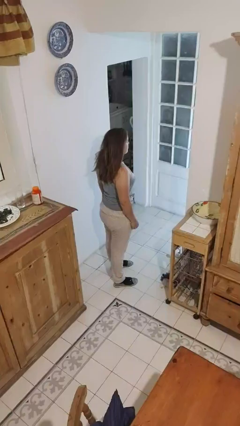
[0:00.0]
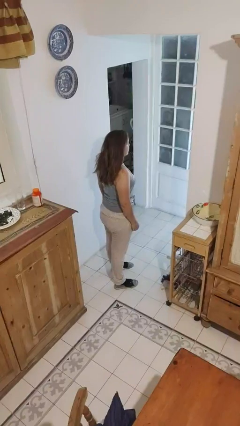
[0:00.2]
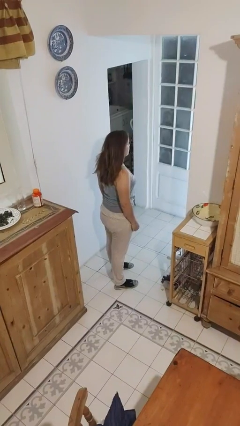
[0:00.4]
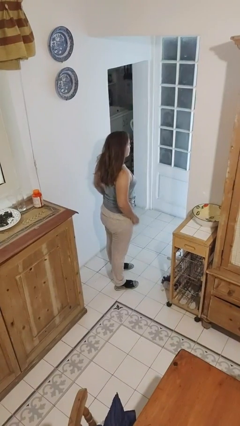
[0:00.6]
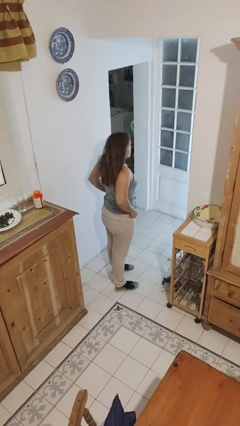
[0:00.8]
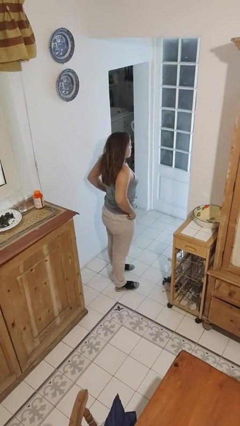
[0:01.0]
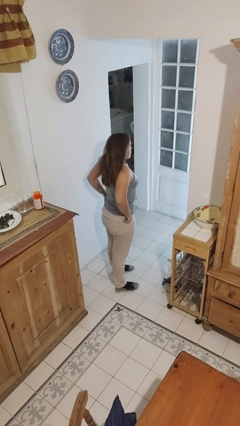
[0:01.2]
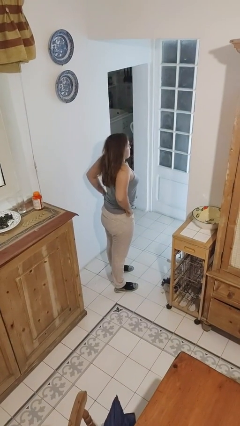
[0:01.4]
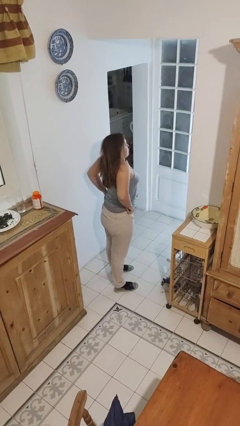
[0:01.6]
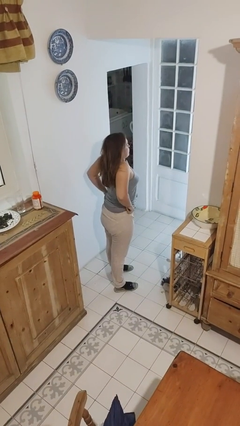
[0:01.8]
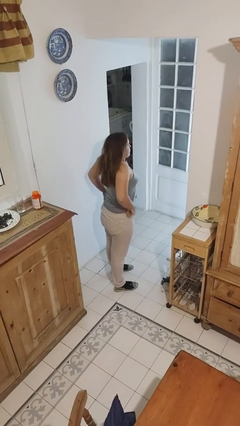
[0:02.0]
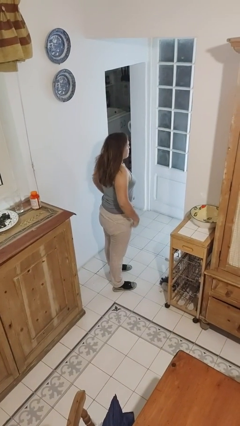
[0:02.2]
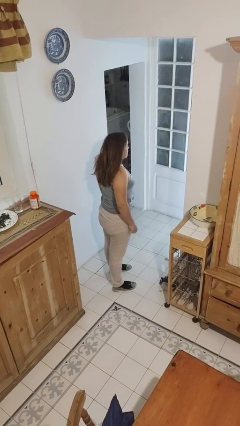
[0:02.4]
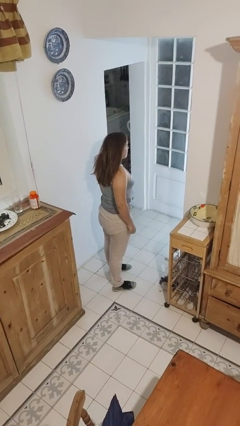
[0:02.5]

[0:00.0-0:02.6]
person hikes up pants

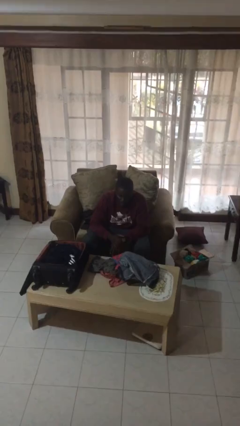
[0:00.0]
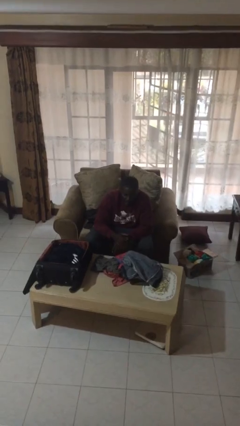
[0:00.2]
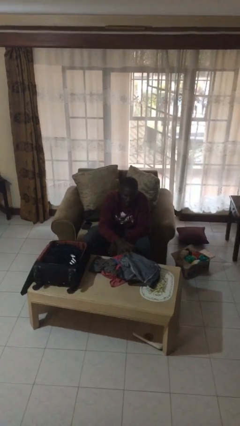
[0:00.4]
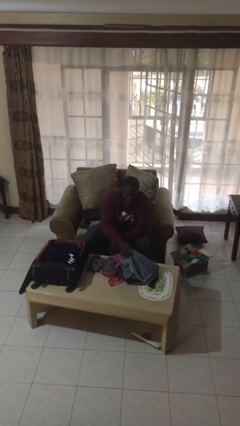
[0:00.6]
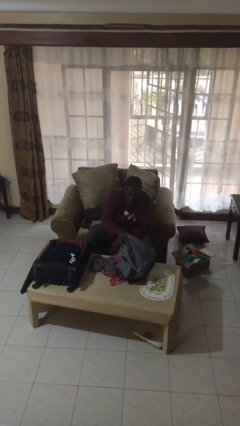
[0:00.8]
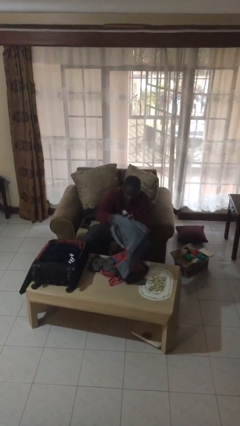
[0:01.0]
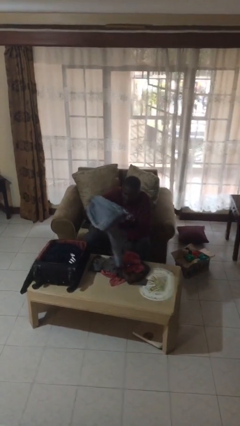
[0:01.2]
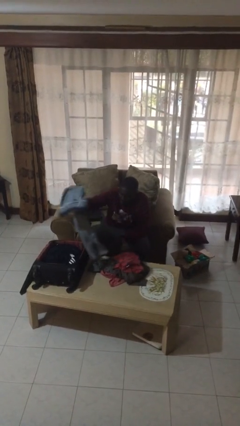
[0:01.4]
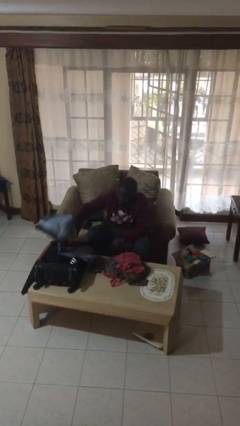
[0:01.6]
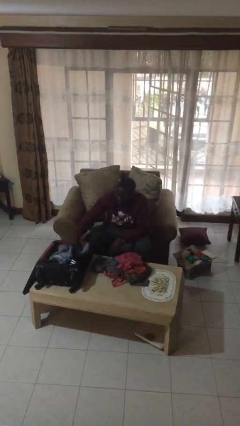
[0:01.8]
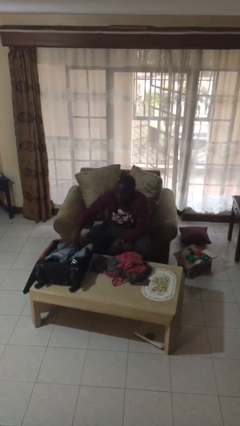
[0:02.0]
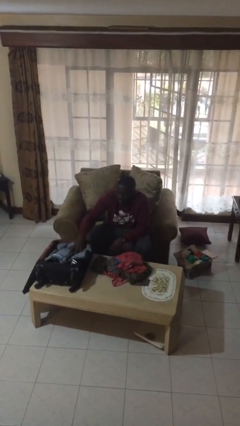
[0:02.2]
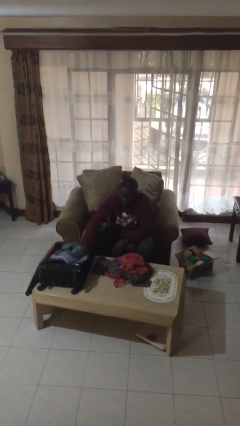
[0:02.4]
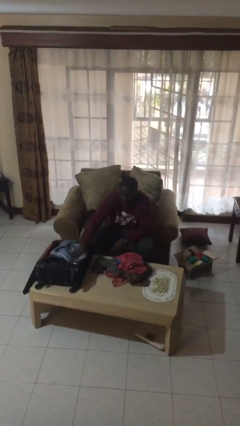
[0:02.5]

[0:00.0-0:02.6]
person loads clothes into suitcase

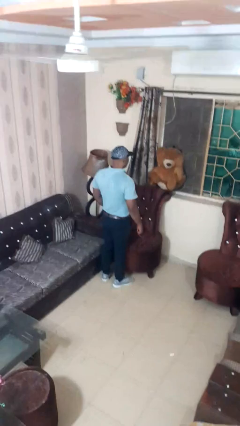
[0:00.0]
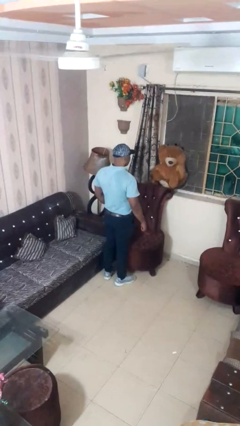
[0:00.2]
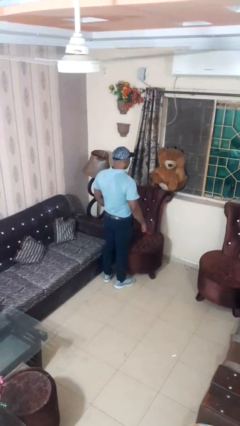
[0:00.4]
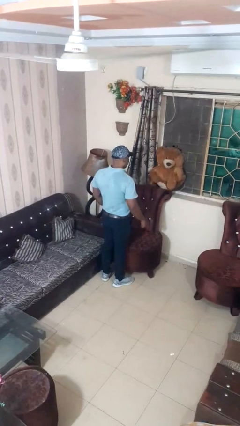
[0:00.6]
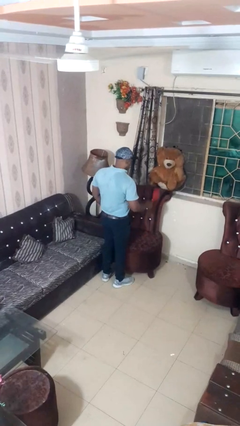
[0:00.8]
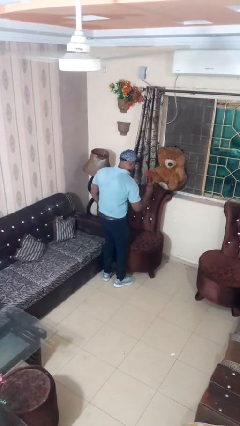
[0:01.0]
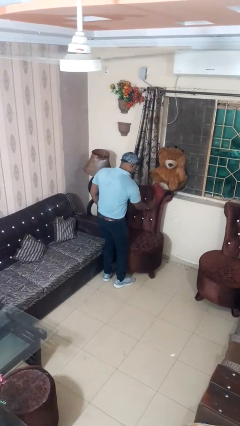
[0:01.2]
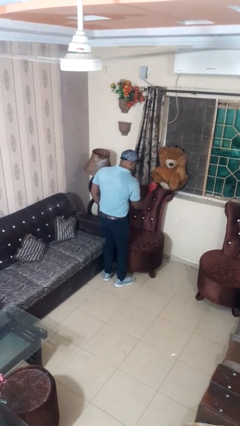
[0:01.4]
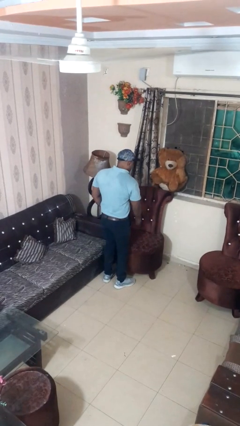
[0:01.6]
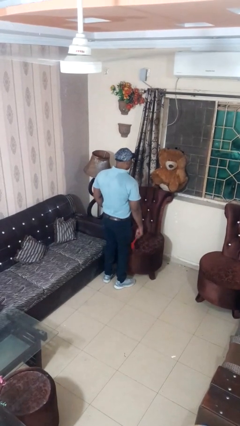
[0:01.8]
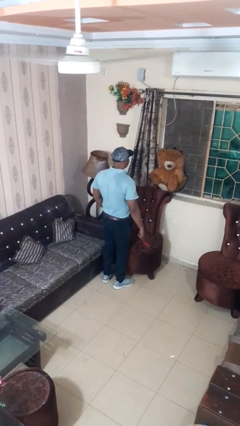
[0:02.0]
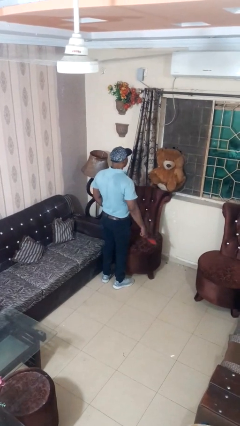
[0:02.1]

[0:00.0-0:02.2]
person swats bug

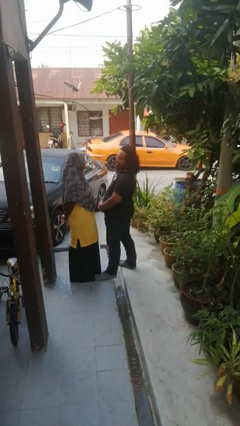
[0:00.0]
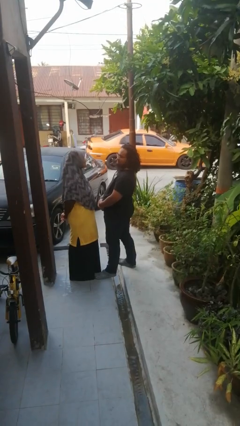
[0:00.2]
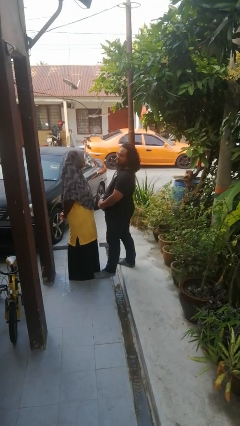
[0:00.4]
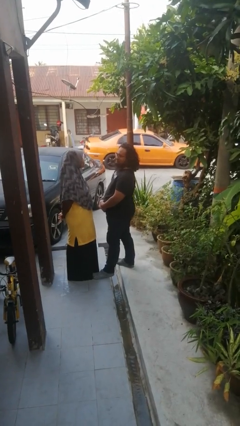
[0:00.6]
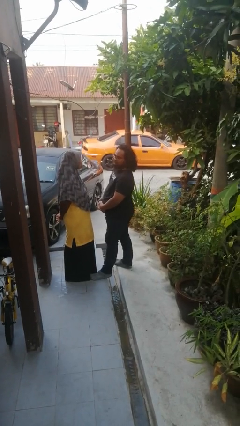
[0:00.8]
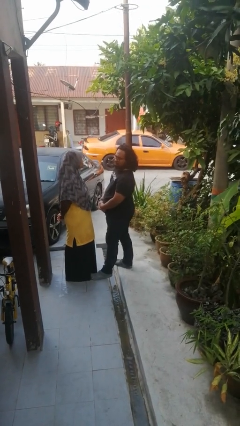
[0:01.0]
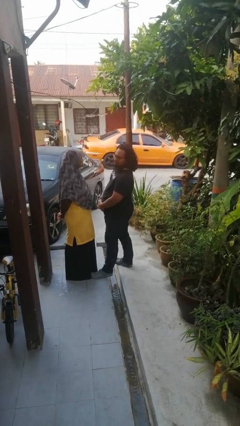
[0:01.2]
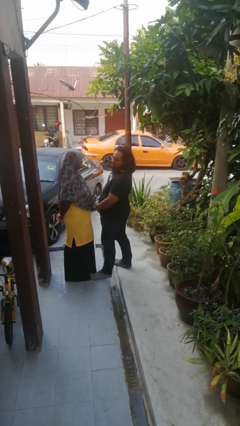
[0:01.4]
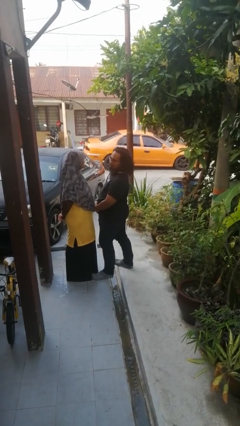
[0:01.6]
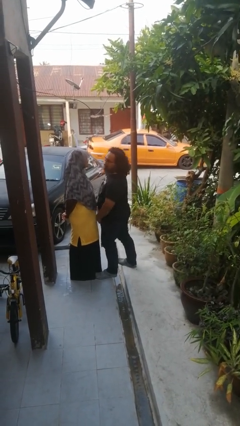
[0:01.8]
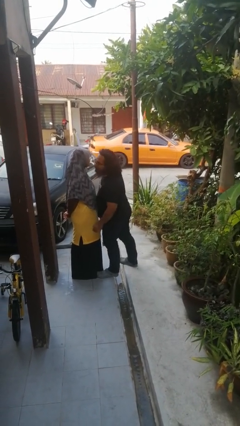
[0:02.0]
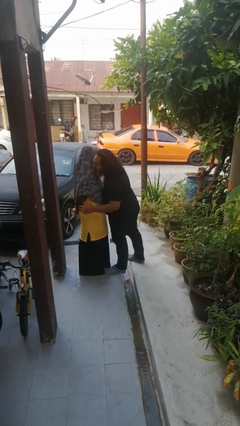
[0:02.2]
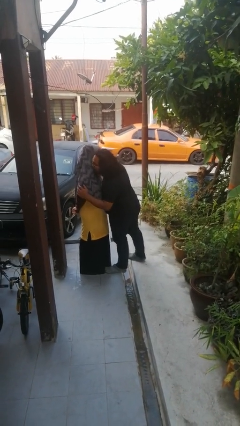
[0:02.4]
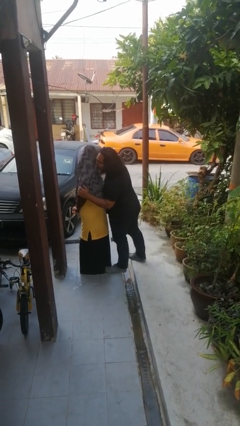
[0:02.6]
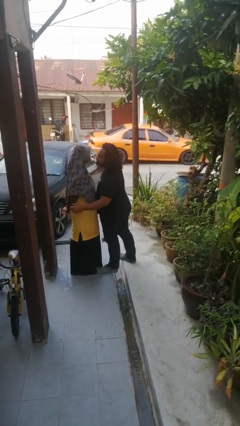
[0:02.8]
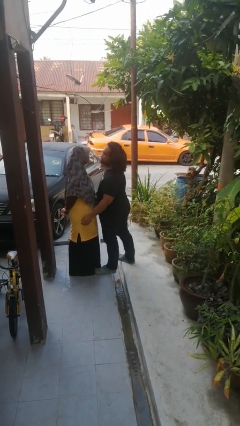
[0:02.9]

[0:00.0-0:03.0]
person kisses cheek of person

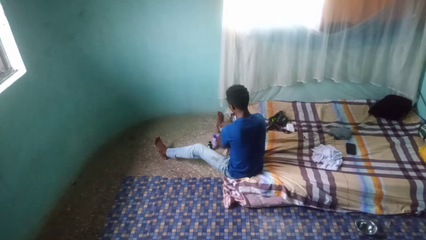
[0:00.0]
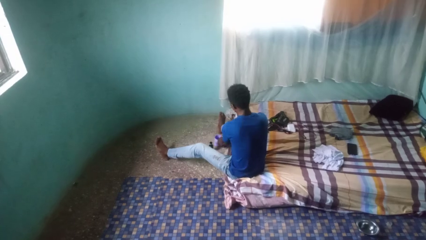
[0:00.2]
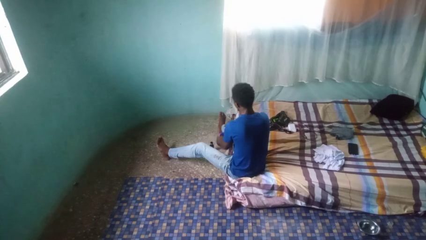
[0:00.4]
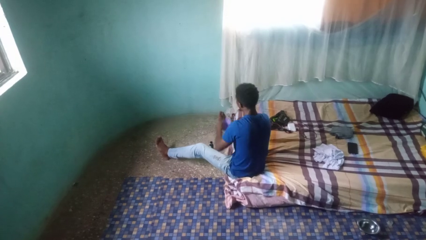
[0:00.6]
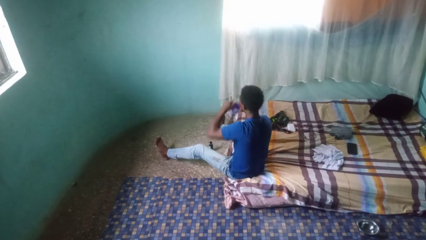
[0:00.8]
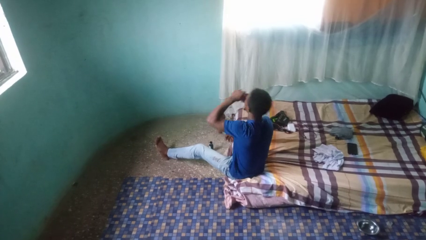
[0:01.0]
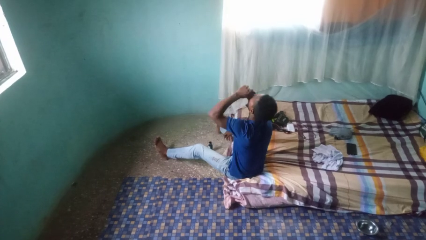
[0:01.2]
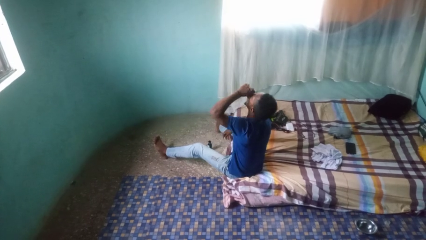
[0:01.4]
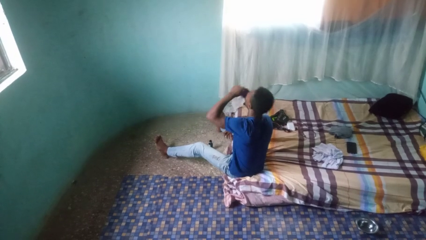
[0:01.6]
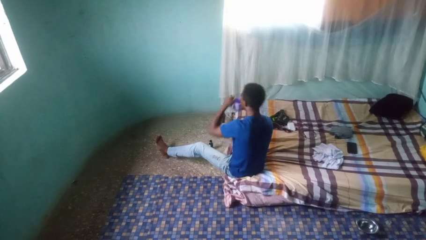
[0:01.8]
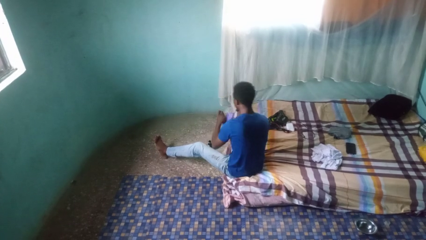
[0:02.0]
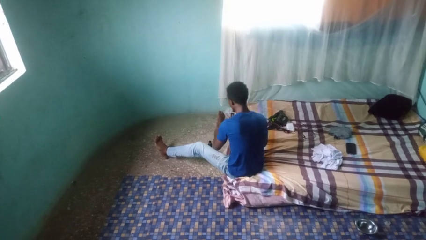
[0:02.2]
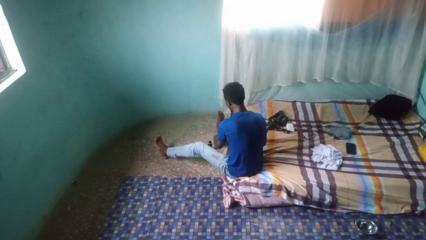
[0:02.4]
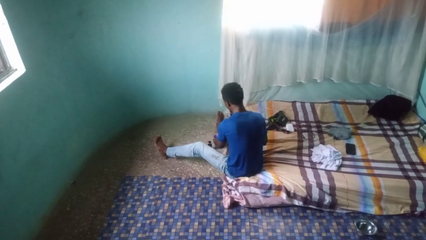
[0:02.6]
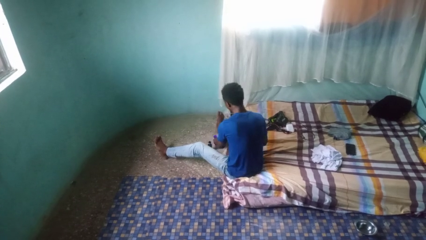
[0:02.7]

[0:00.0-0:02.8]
person drinks from cup

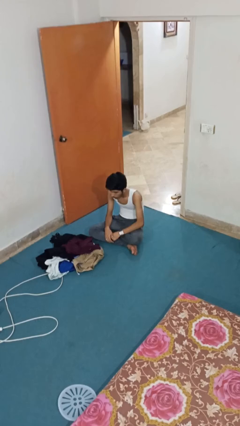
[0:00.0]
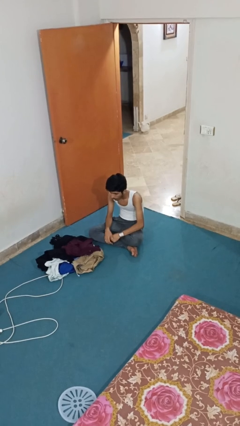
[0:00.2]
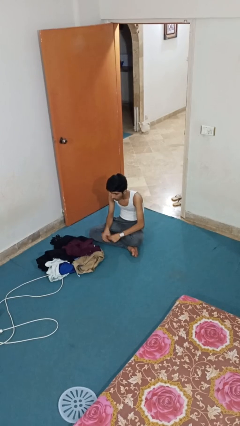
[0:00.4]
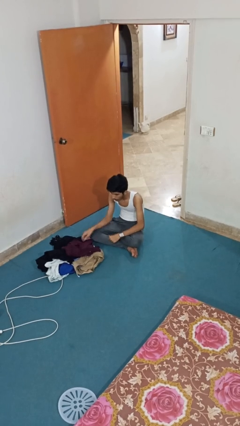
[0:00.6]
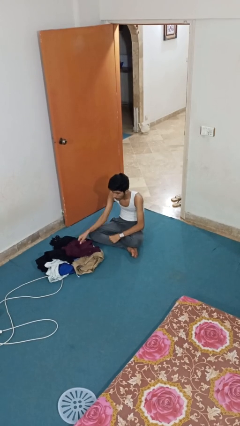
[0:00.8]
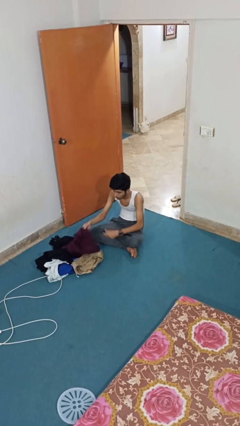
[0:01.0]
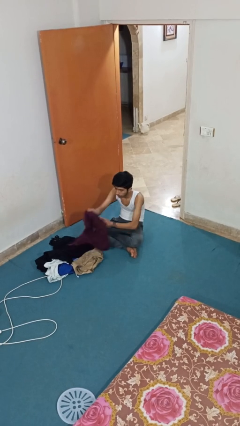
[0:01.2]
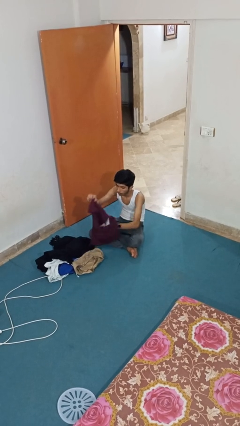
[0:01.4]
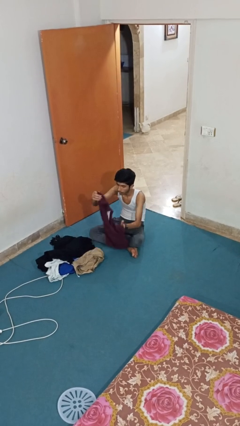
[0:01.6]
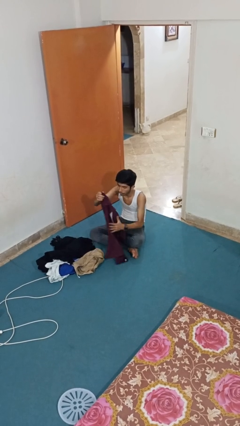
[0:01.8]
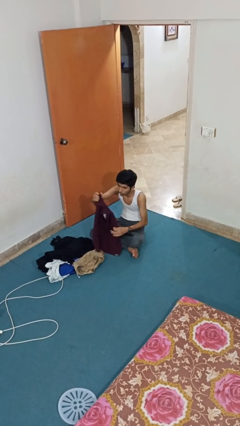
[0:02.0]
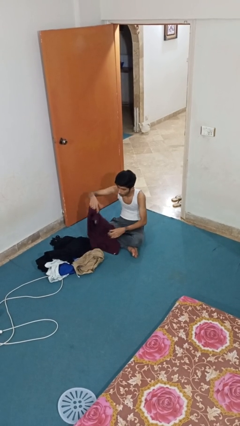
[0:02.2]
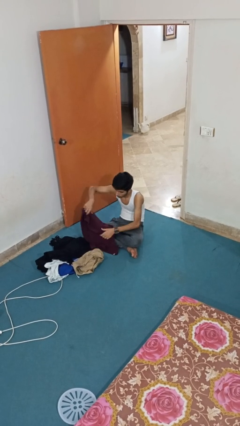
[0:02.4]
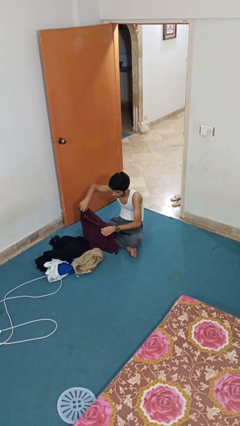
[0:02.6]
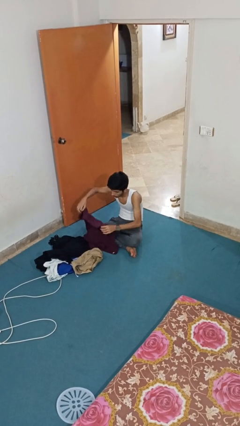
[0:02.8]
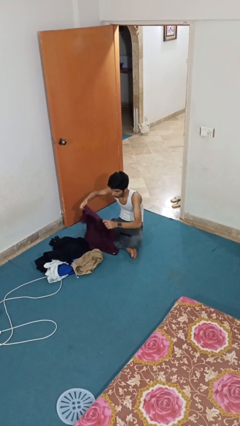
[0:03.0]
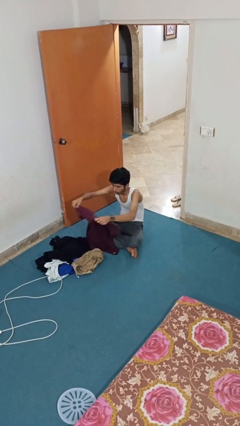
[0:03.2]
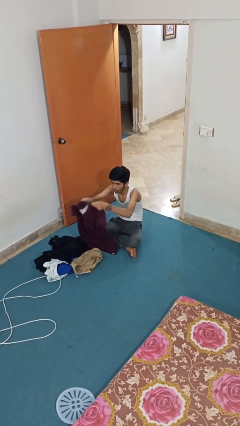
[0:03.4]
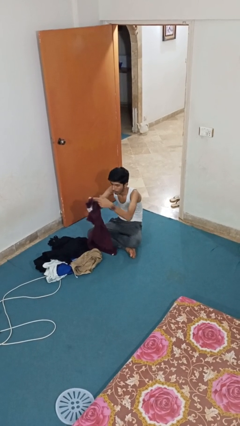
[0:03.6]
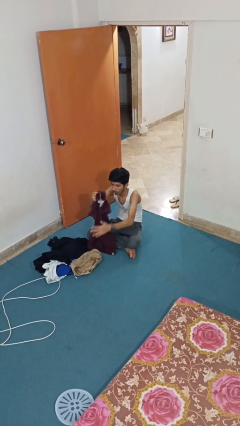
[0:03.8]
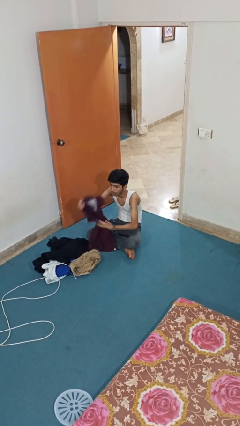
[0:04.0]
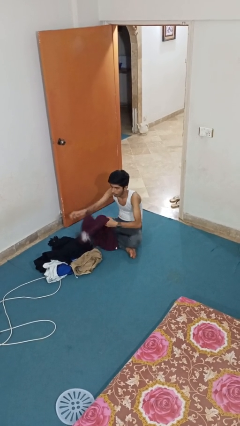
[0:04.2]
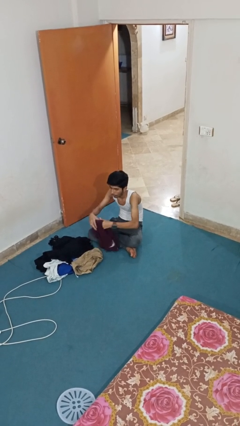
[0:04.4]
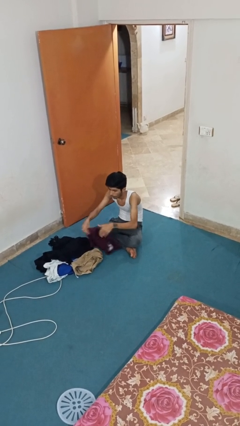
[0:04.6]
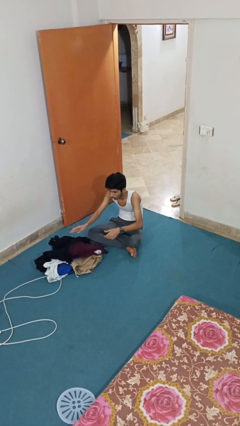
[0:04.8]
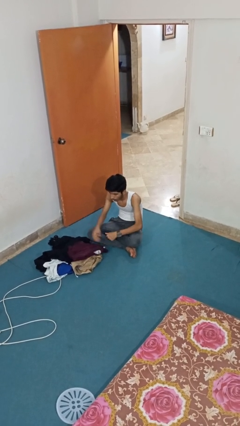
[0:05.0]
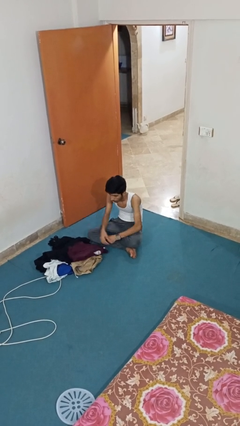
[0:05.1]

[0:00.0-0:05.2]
person folds shirt
